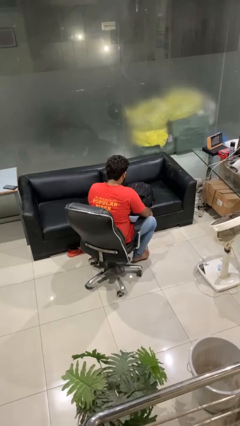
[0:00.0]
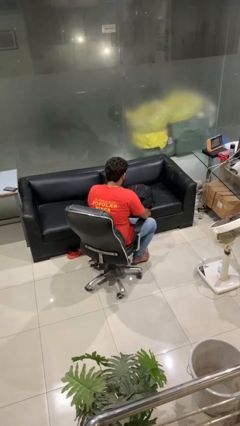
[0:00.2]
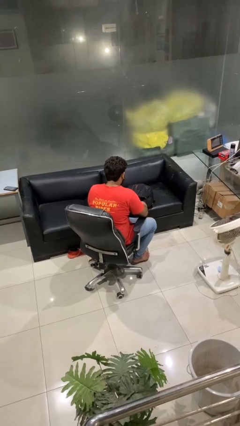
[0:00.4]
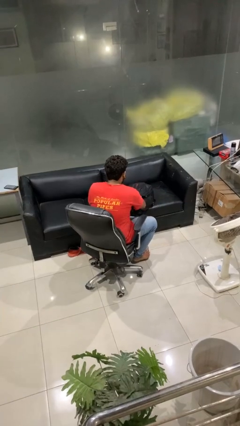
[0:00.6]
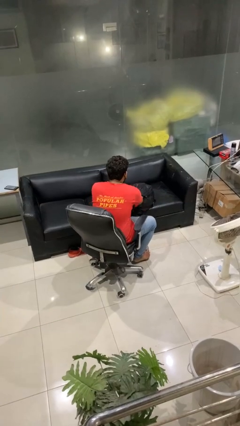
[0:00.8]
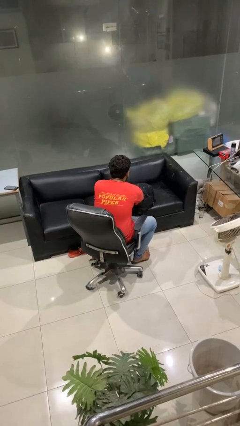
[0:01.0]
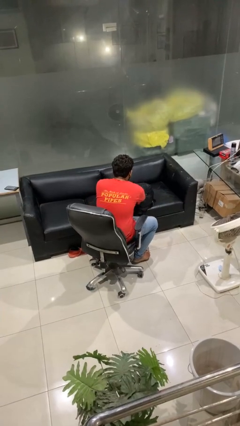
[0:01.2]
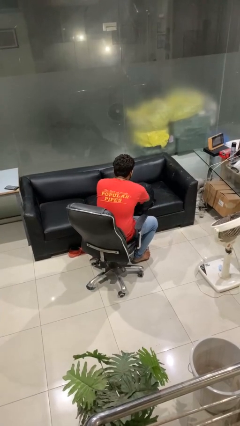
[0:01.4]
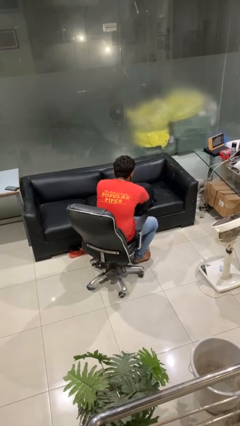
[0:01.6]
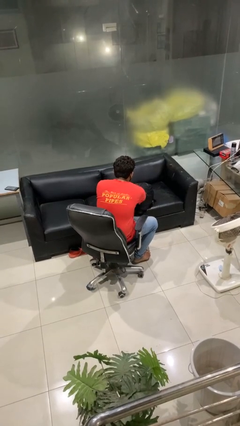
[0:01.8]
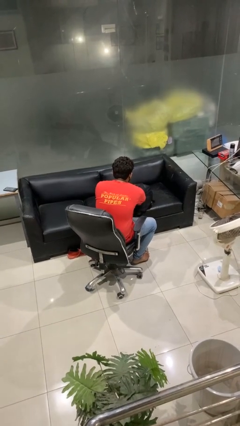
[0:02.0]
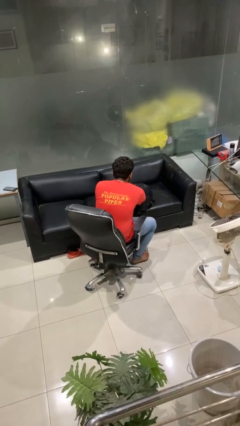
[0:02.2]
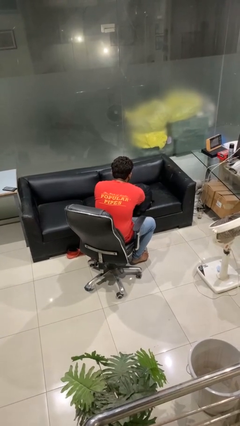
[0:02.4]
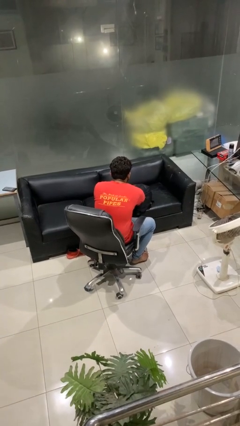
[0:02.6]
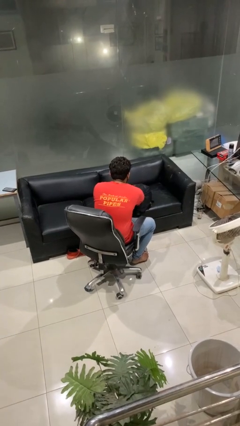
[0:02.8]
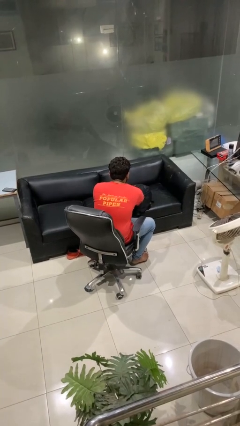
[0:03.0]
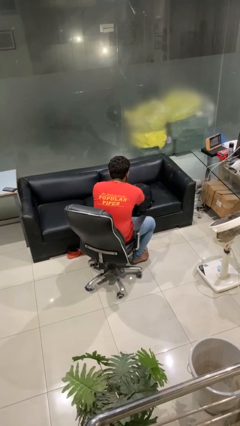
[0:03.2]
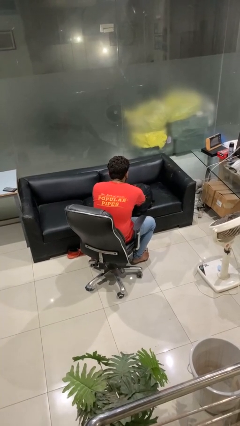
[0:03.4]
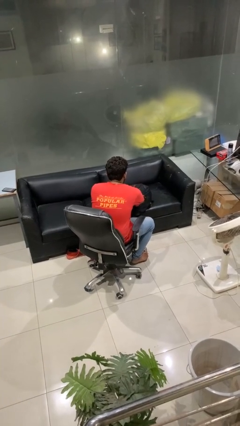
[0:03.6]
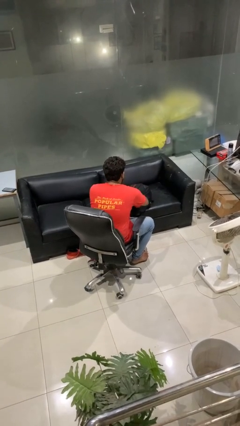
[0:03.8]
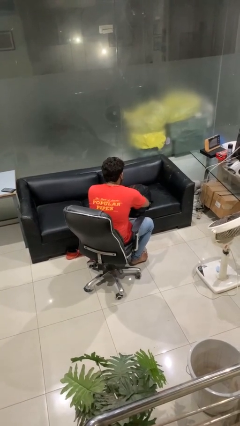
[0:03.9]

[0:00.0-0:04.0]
person searches in backpack

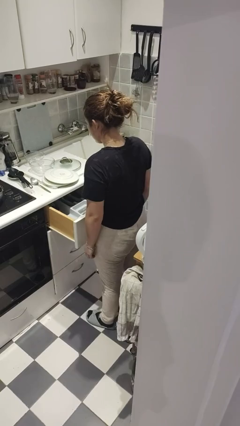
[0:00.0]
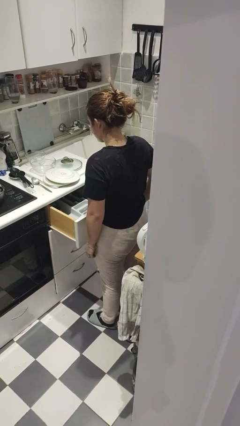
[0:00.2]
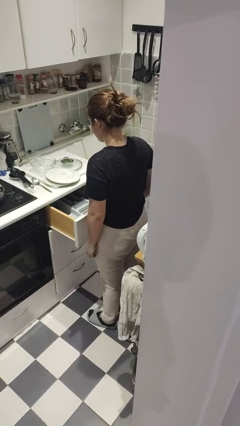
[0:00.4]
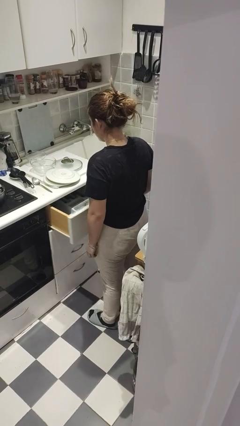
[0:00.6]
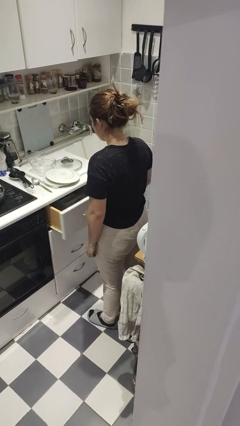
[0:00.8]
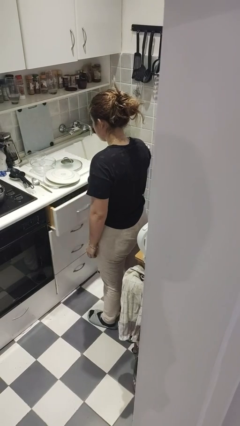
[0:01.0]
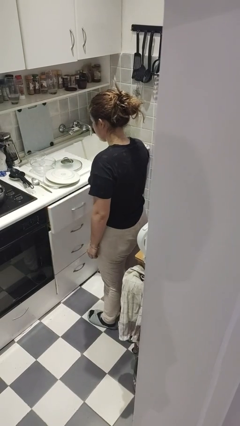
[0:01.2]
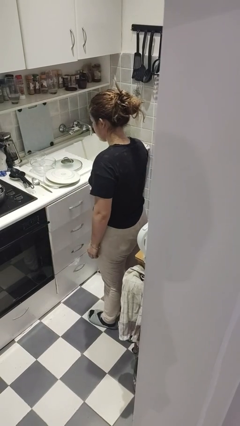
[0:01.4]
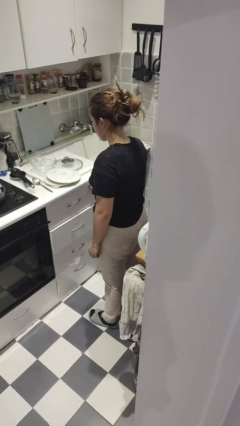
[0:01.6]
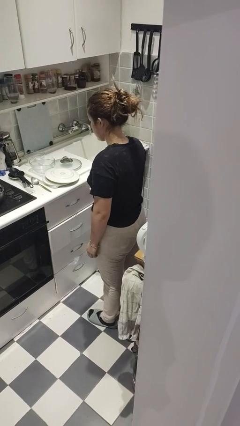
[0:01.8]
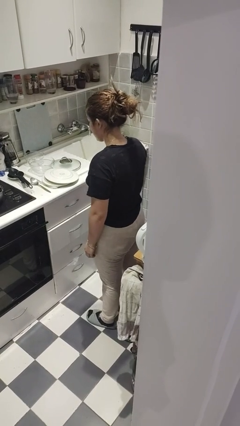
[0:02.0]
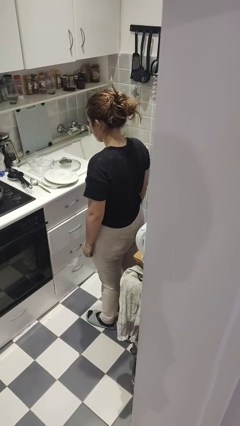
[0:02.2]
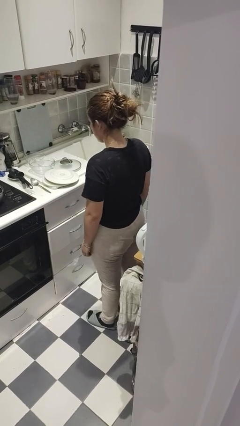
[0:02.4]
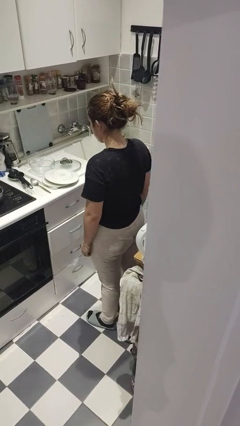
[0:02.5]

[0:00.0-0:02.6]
person closes kitchen drawer

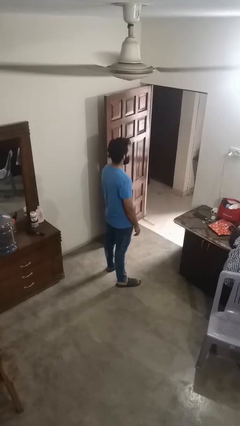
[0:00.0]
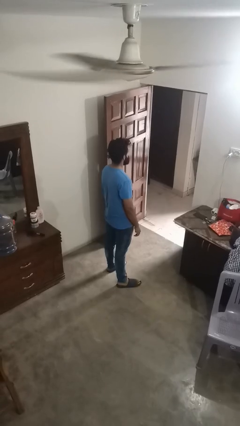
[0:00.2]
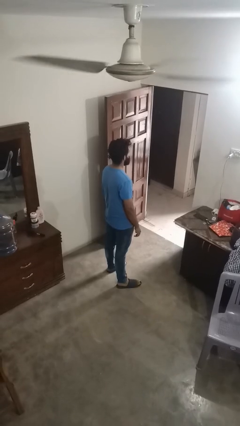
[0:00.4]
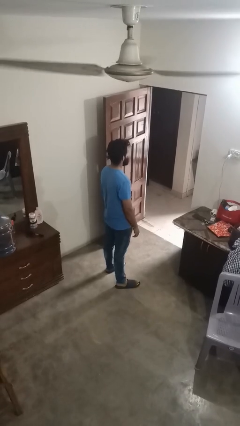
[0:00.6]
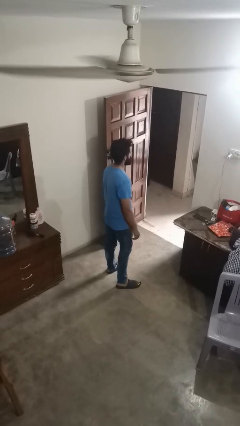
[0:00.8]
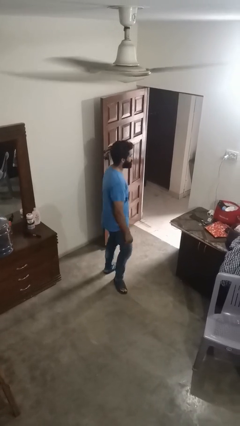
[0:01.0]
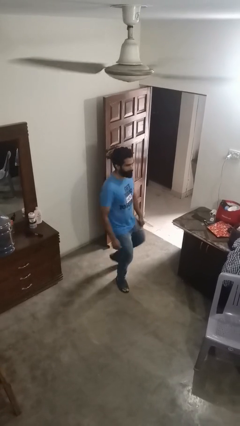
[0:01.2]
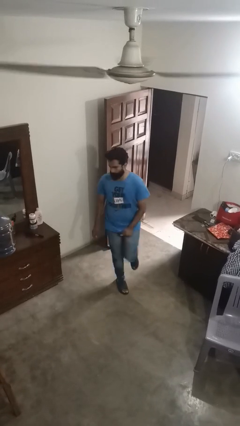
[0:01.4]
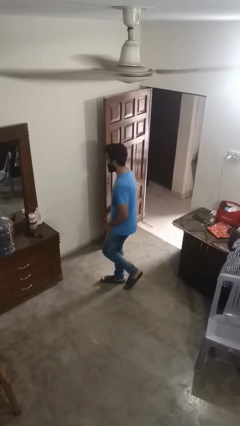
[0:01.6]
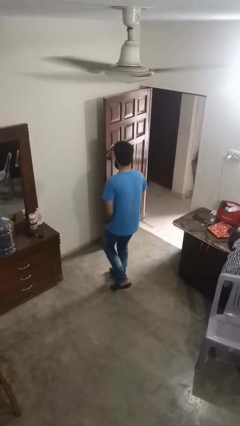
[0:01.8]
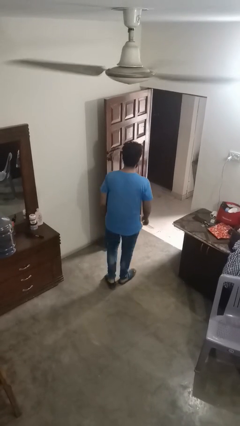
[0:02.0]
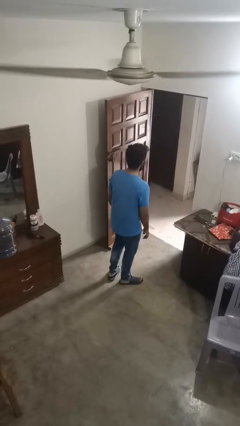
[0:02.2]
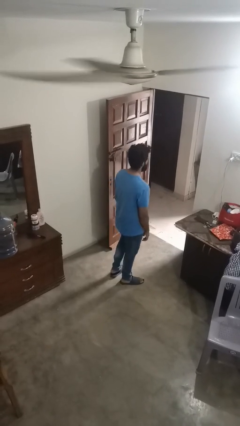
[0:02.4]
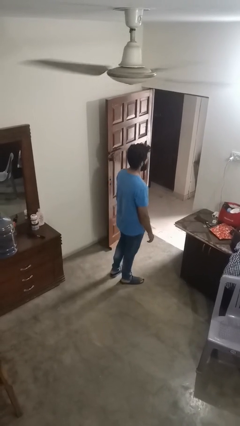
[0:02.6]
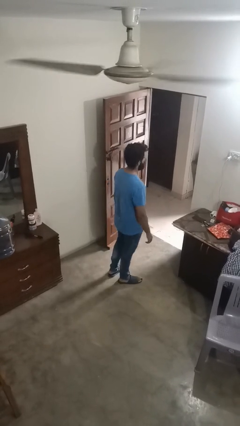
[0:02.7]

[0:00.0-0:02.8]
person twirls

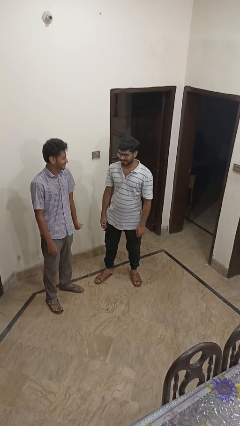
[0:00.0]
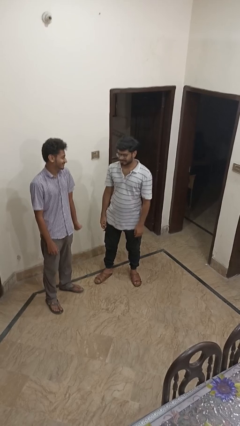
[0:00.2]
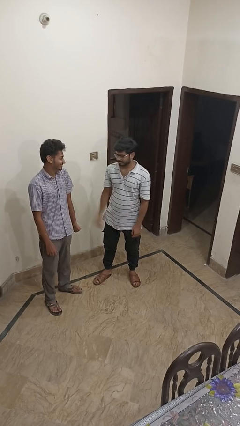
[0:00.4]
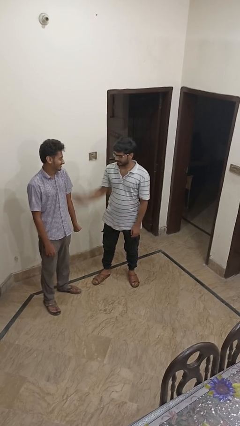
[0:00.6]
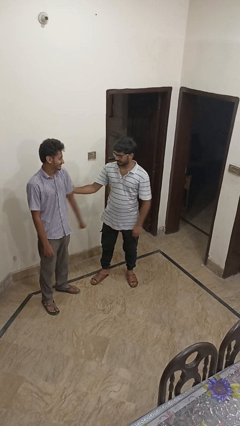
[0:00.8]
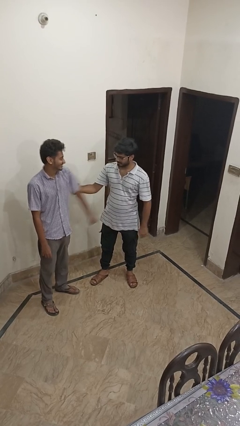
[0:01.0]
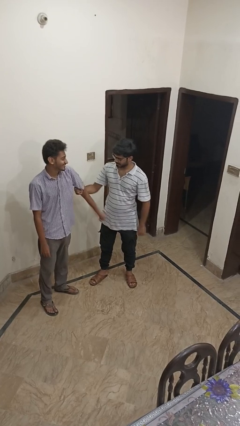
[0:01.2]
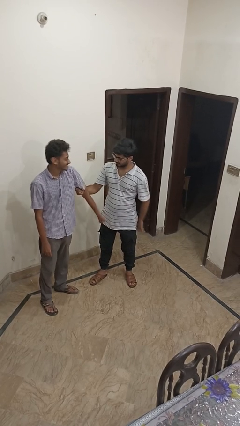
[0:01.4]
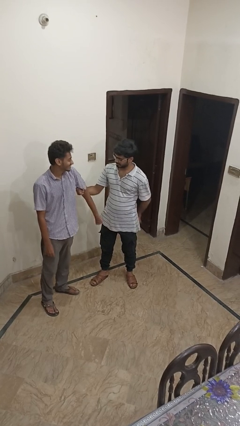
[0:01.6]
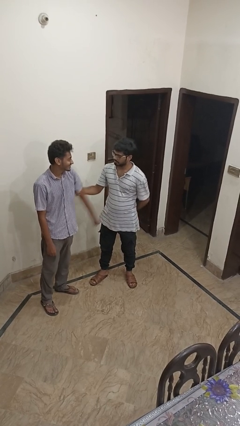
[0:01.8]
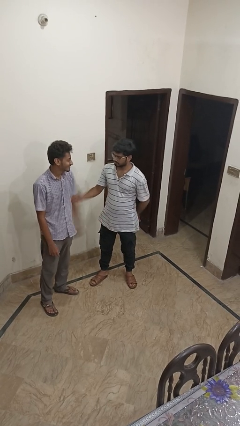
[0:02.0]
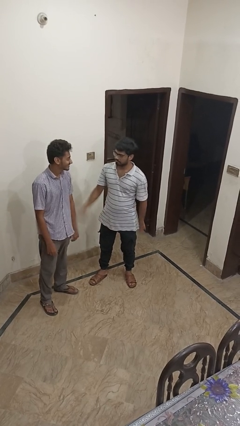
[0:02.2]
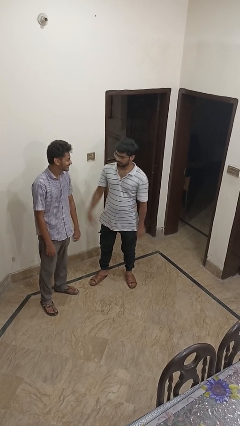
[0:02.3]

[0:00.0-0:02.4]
person grabs person by bicep

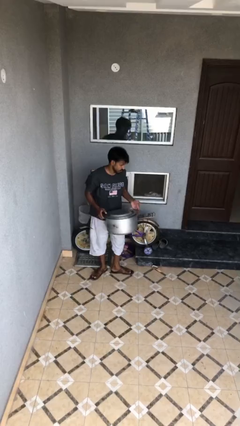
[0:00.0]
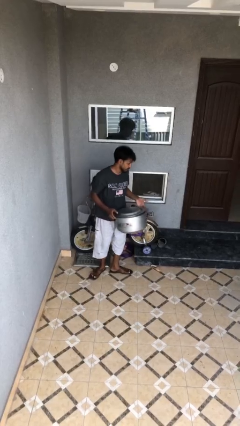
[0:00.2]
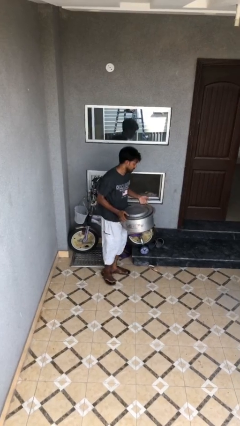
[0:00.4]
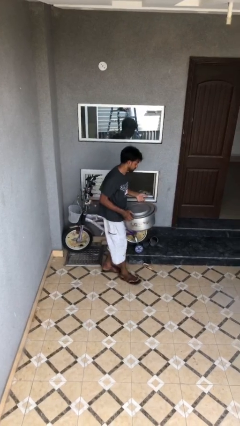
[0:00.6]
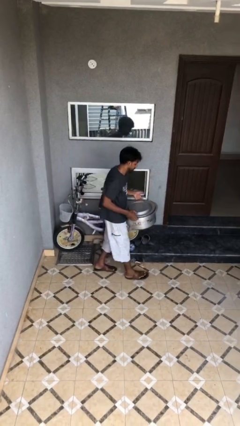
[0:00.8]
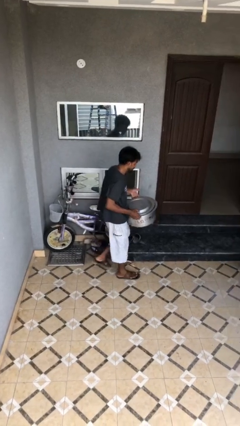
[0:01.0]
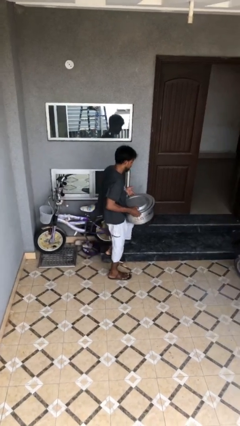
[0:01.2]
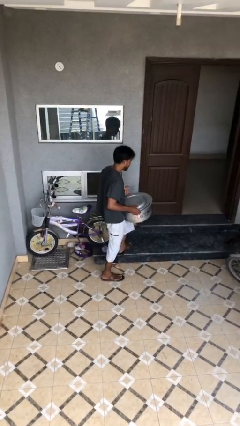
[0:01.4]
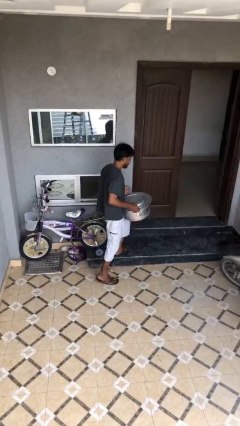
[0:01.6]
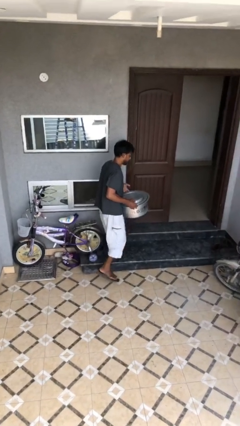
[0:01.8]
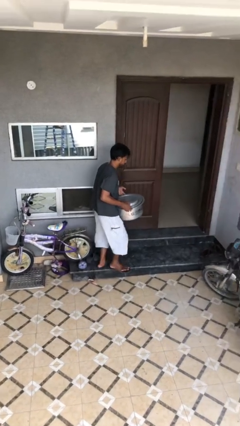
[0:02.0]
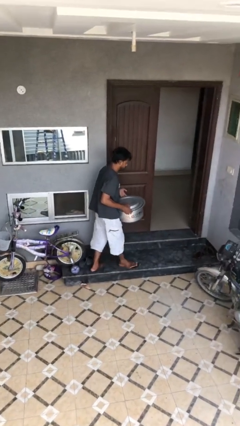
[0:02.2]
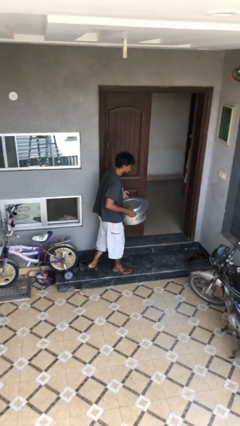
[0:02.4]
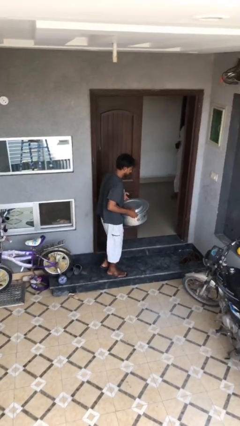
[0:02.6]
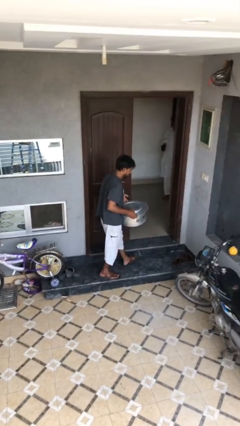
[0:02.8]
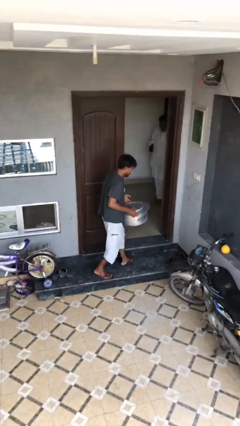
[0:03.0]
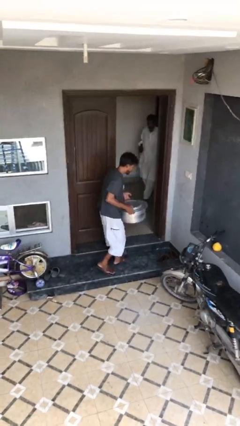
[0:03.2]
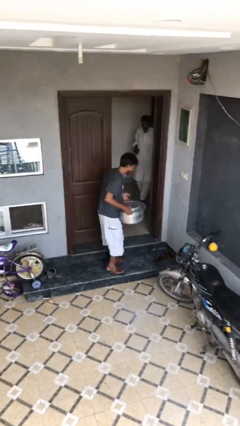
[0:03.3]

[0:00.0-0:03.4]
person carries heavy object

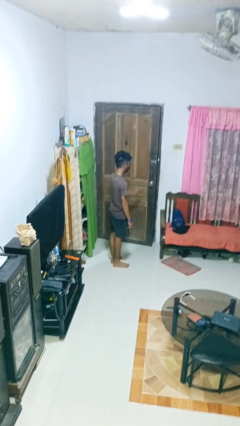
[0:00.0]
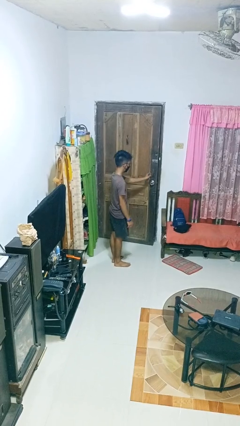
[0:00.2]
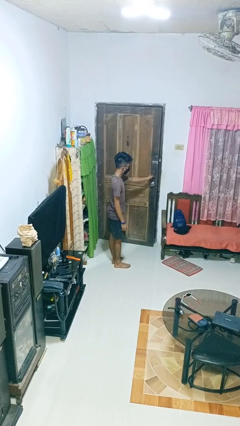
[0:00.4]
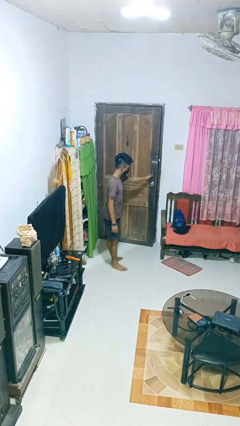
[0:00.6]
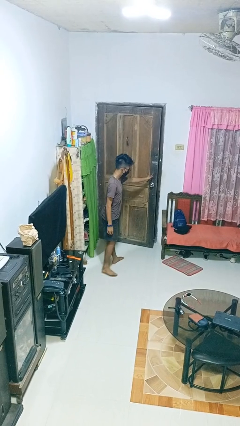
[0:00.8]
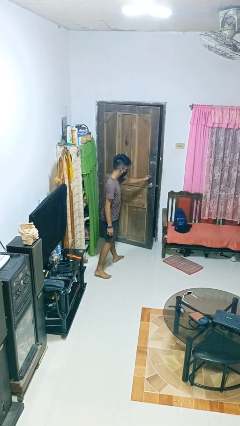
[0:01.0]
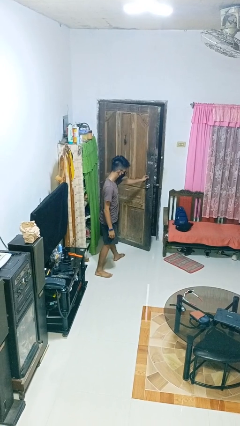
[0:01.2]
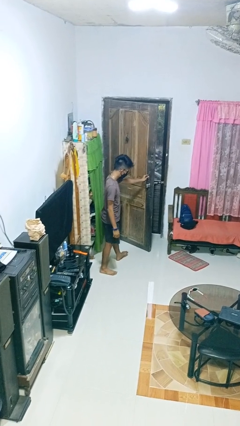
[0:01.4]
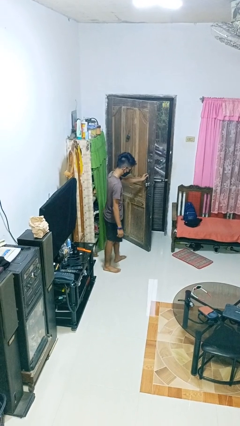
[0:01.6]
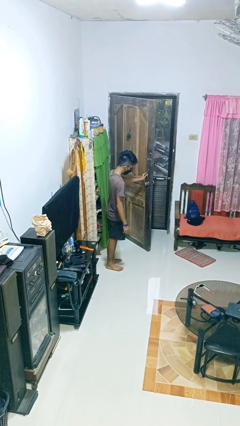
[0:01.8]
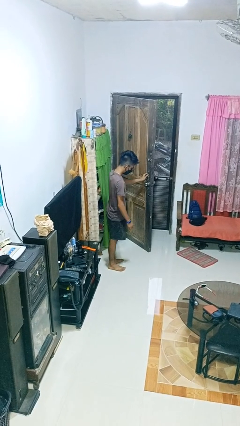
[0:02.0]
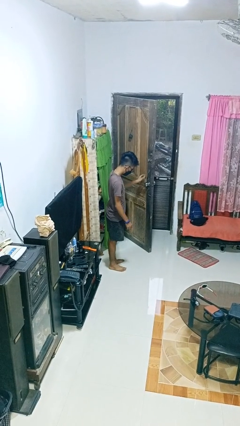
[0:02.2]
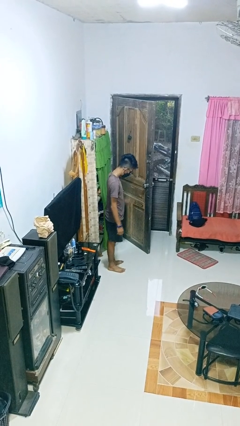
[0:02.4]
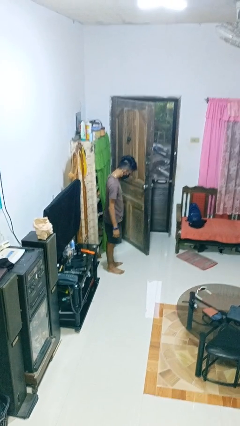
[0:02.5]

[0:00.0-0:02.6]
person opens facility door
